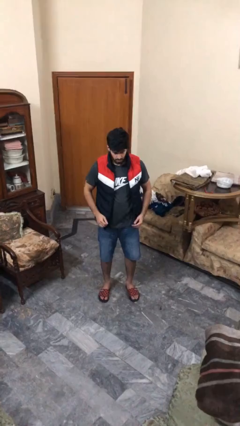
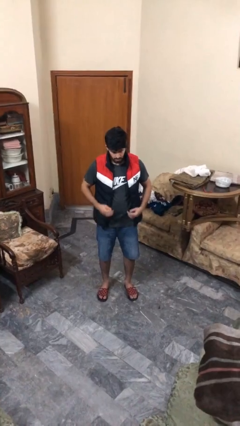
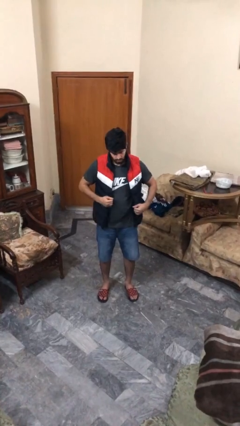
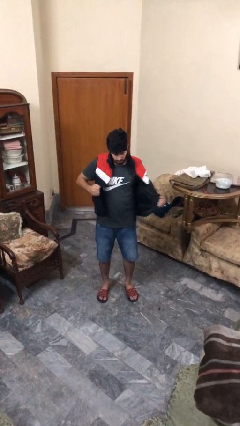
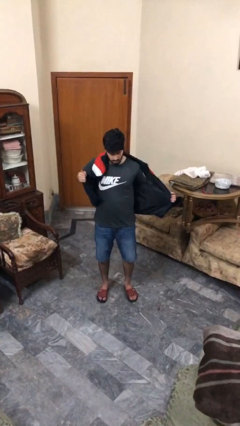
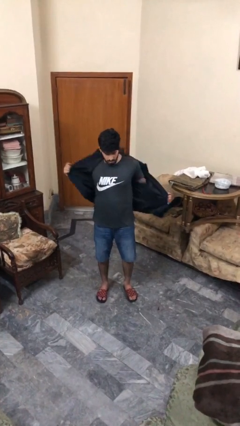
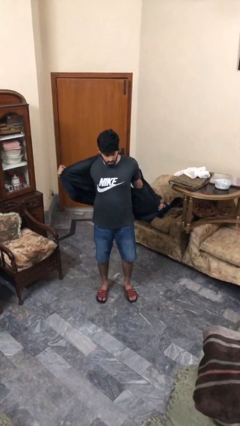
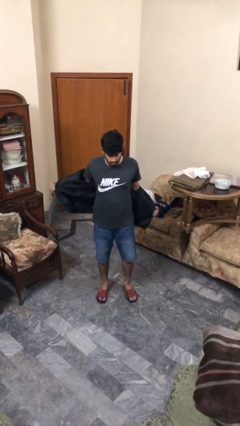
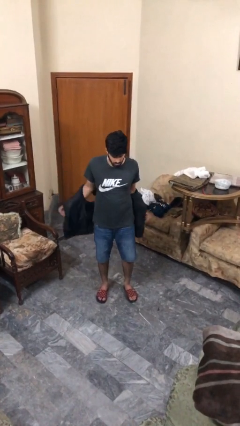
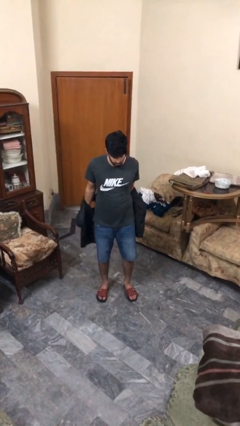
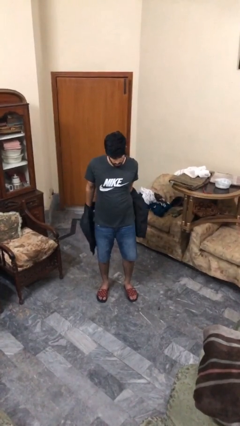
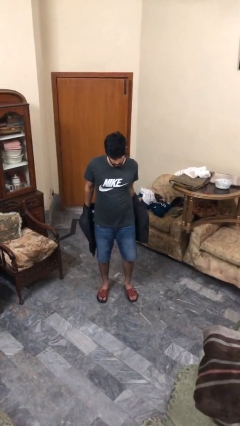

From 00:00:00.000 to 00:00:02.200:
person takes off jacket

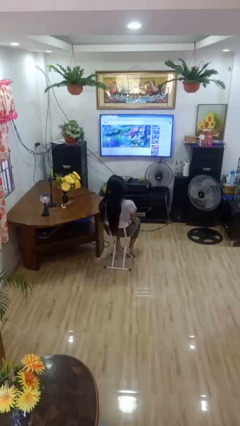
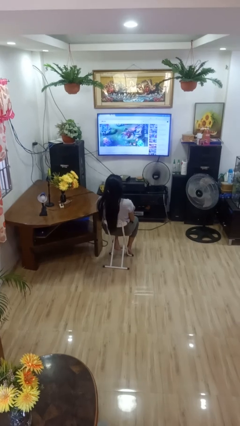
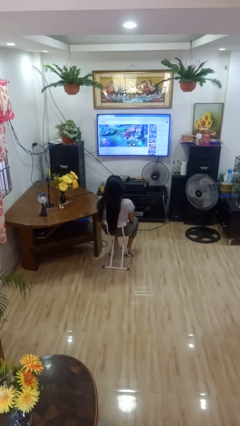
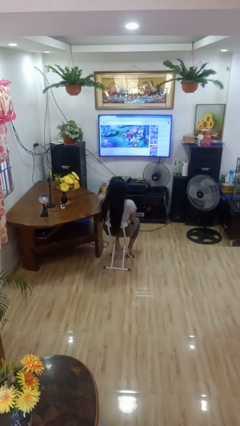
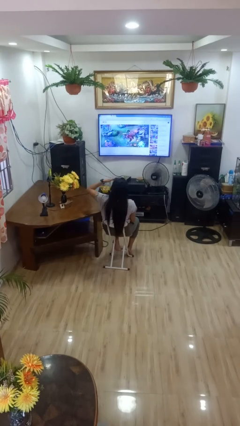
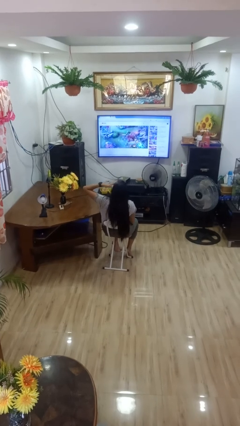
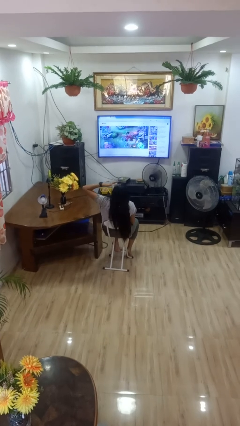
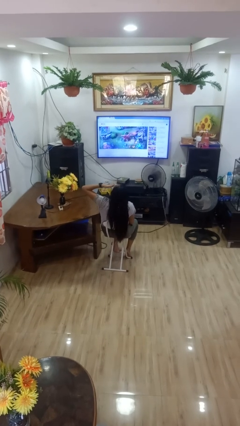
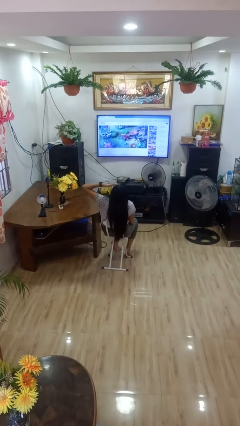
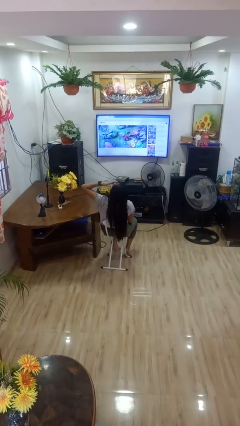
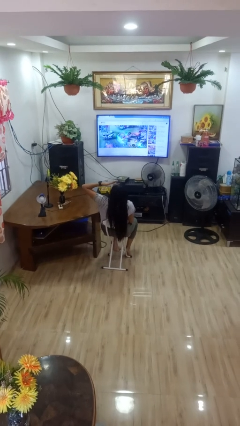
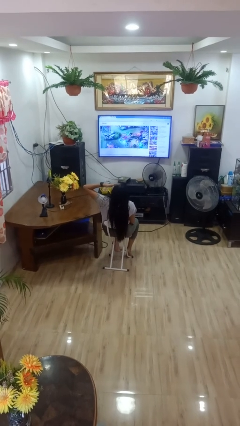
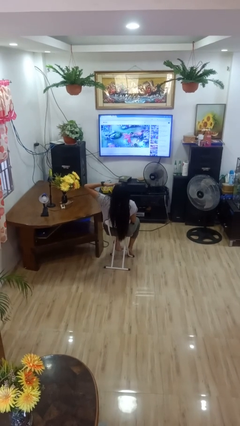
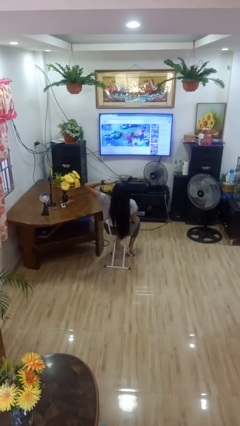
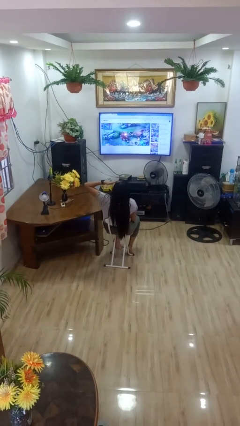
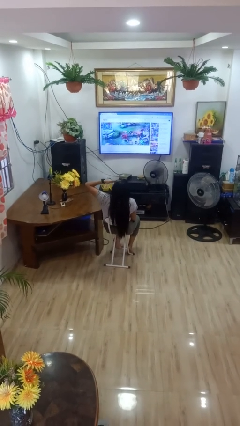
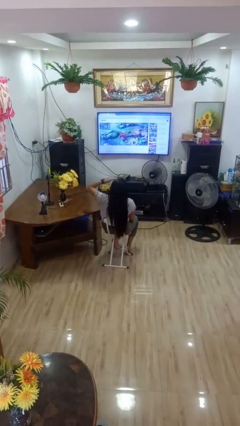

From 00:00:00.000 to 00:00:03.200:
person yawns

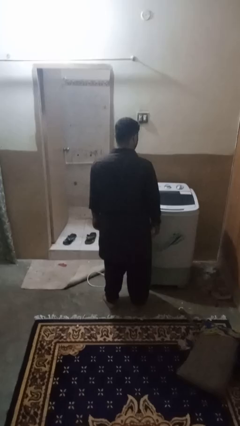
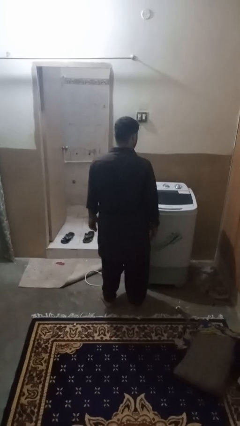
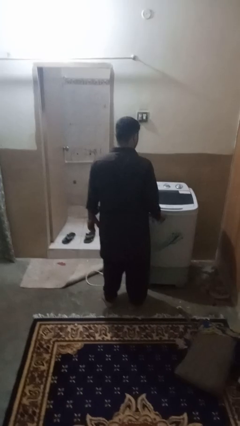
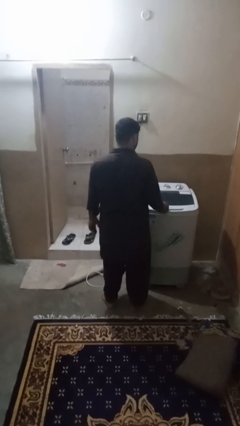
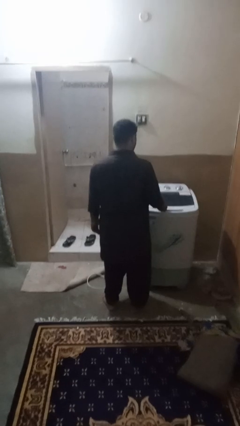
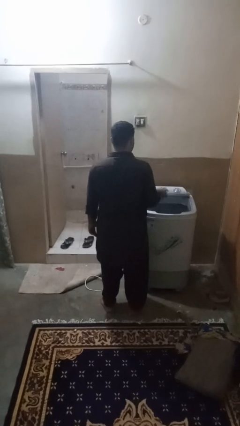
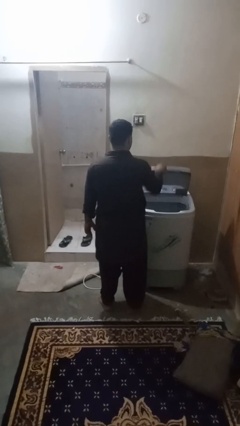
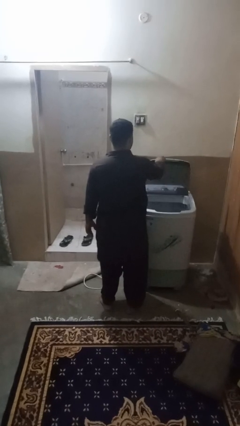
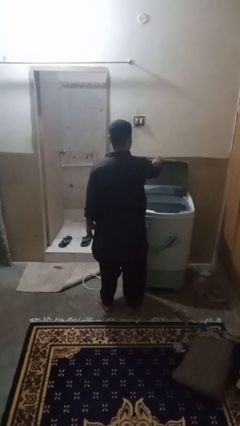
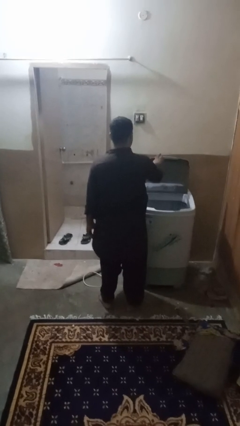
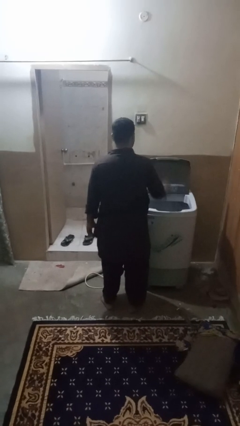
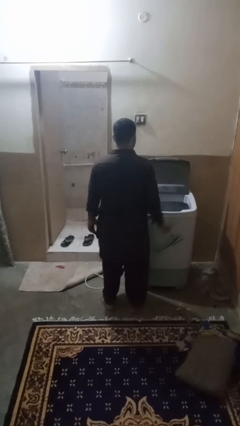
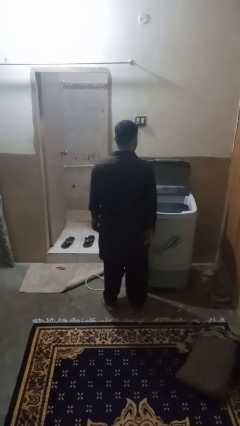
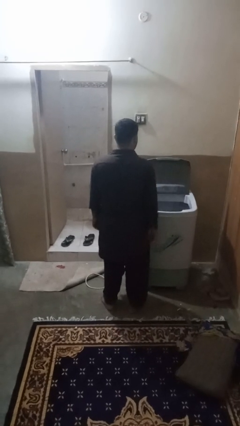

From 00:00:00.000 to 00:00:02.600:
person opens clothes washer

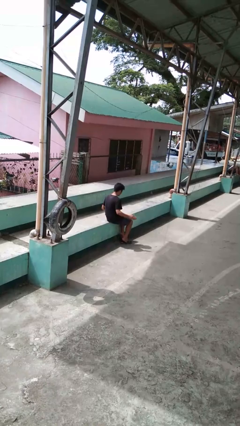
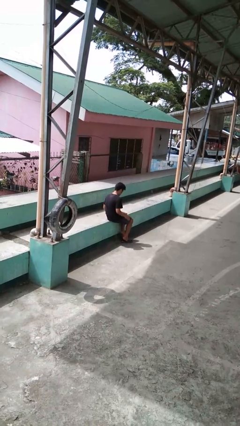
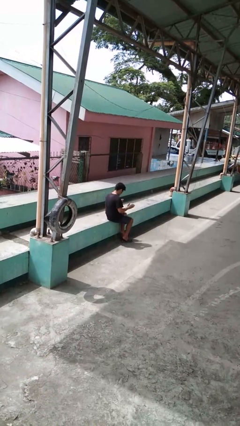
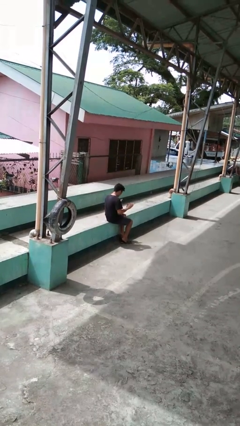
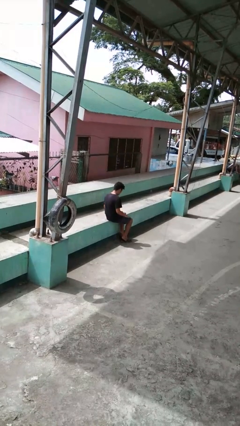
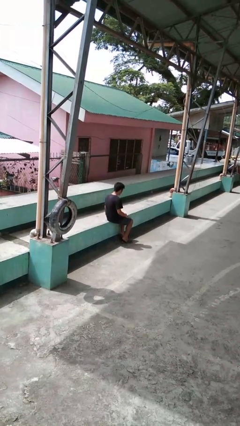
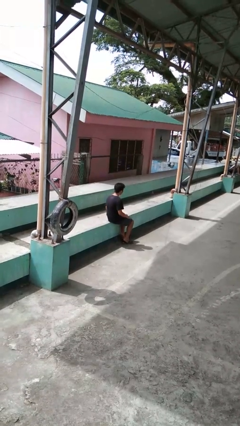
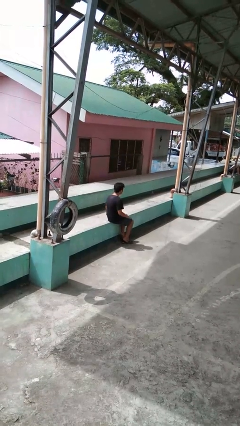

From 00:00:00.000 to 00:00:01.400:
person slaps hands on thighs

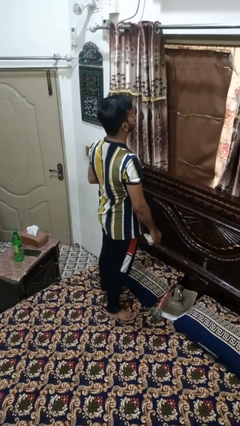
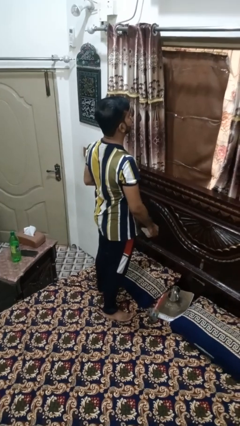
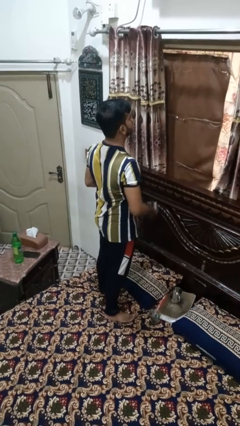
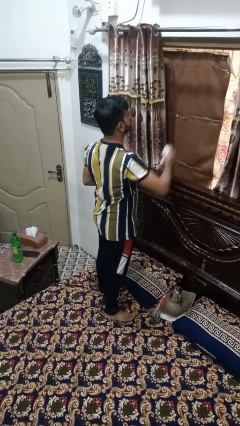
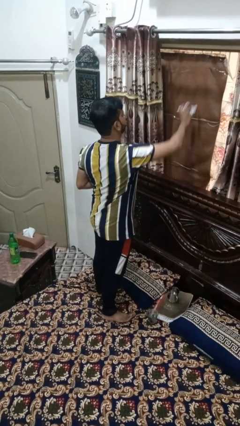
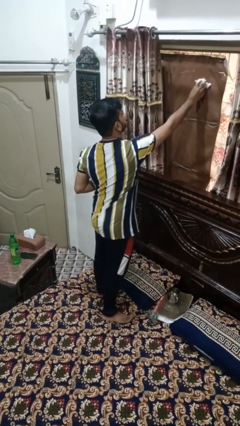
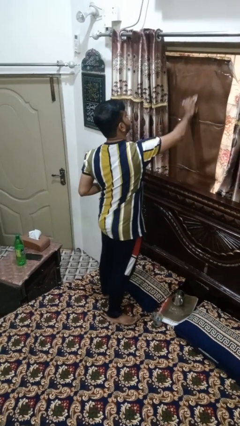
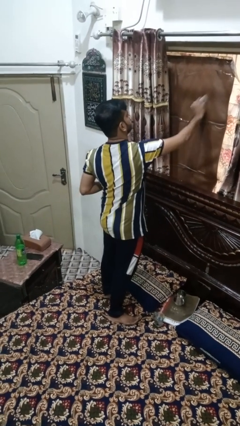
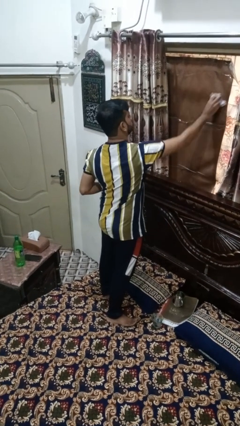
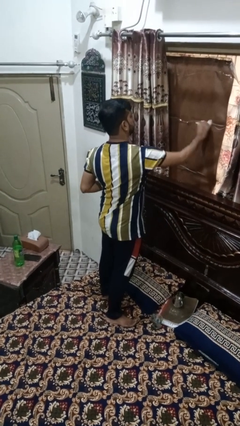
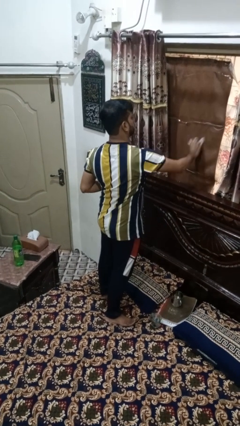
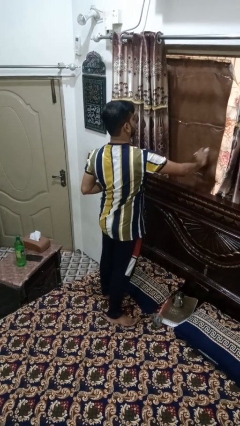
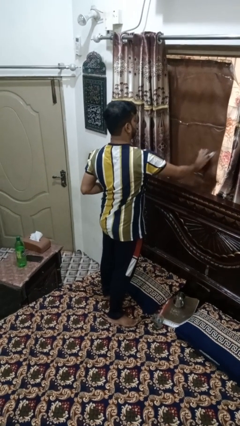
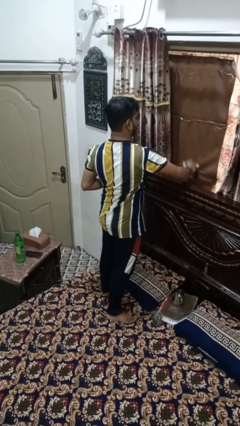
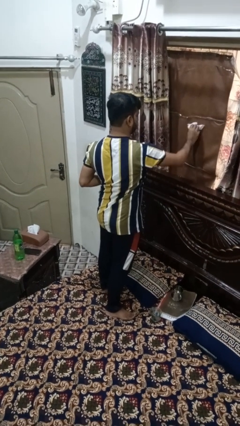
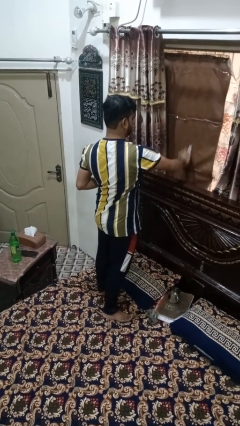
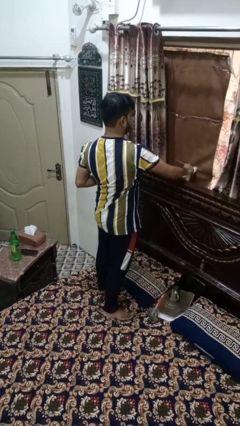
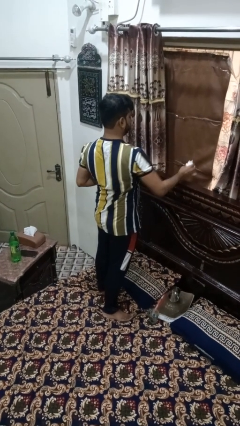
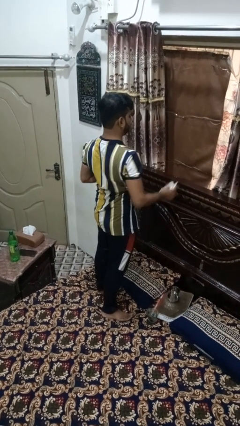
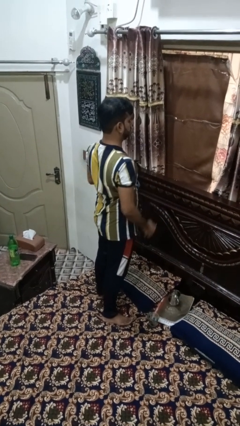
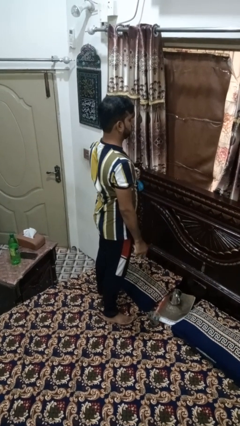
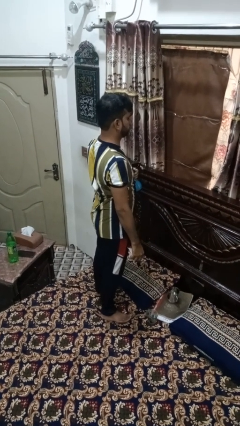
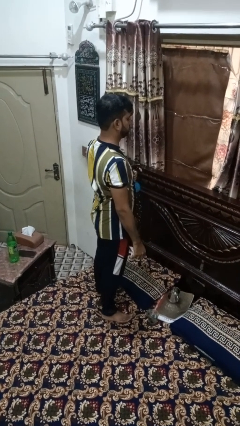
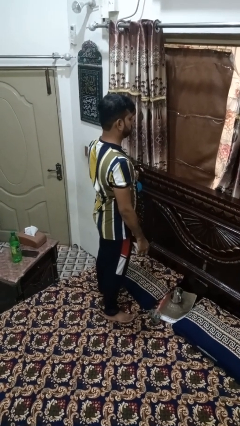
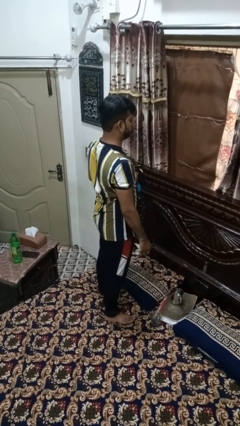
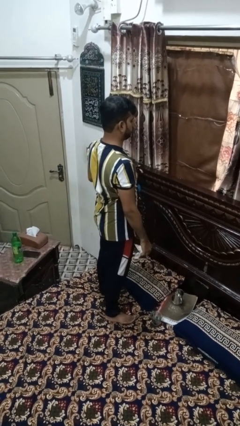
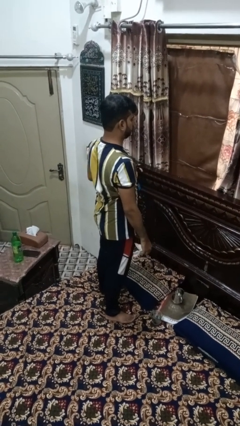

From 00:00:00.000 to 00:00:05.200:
person washes window

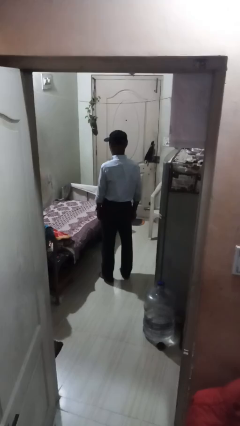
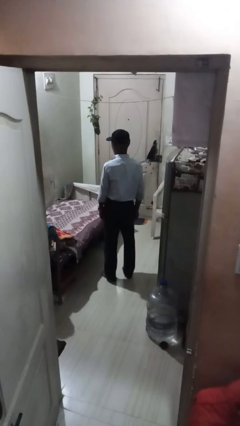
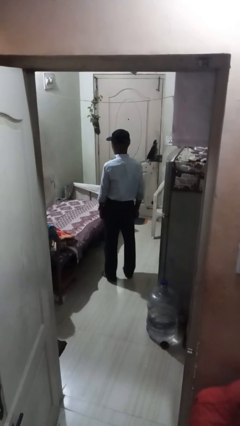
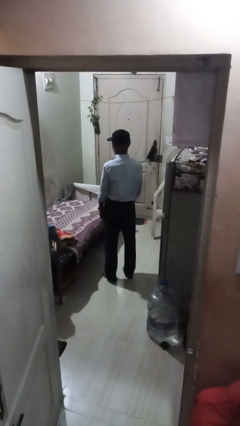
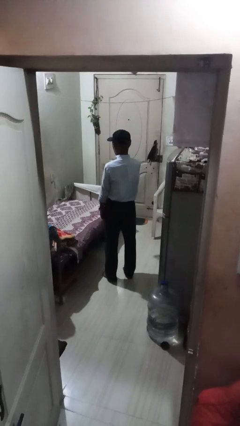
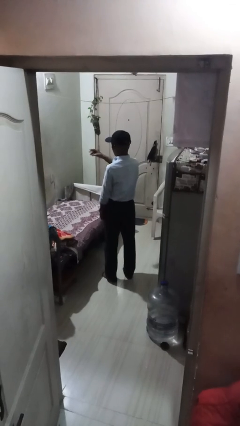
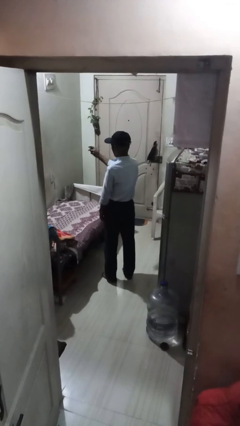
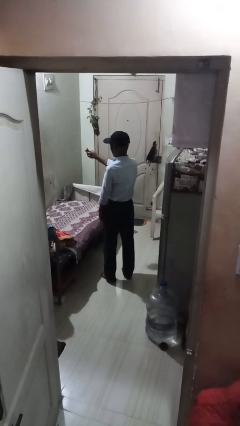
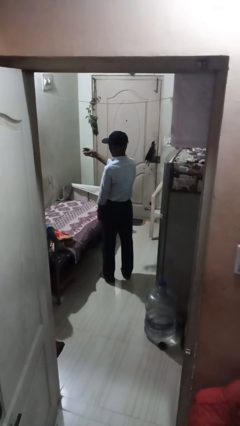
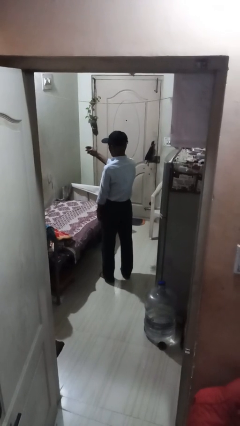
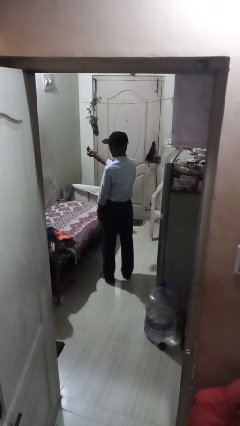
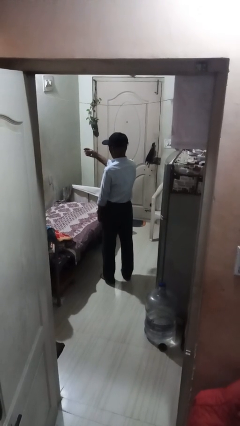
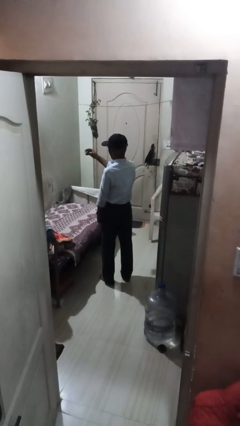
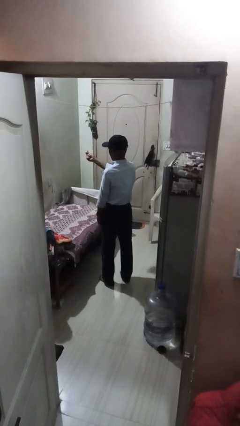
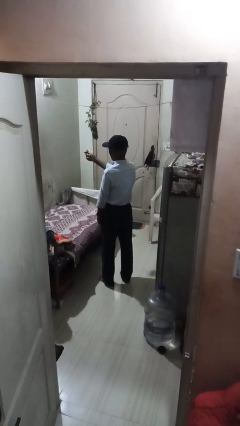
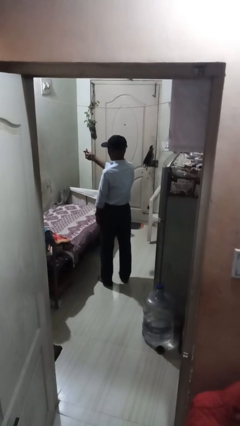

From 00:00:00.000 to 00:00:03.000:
person snaps fingers
